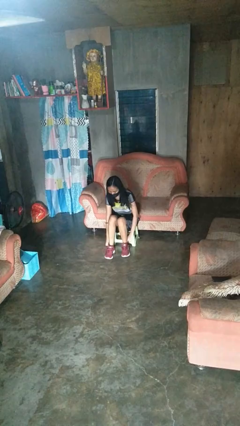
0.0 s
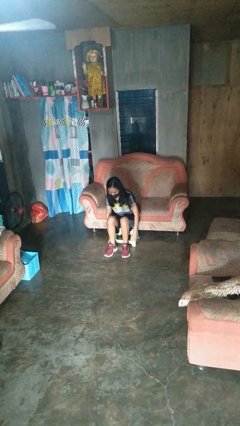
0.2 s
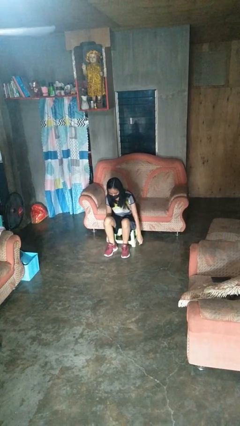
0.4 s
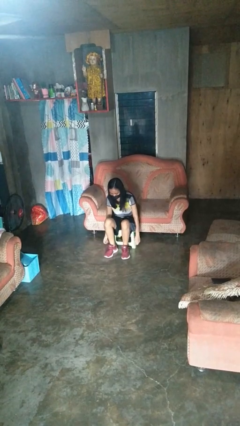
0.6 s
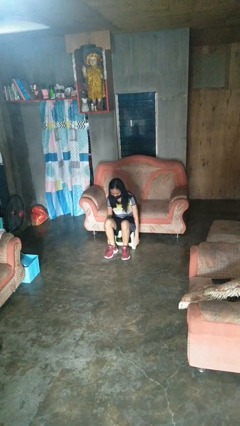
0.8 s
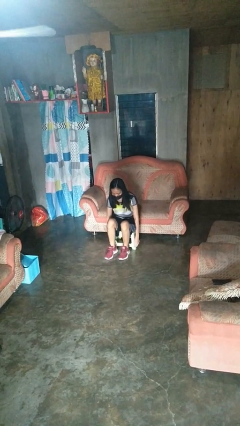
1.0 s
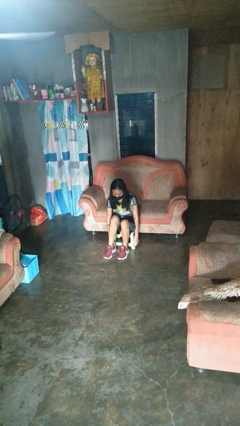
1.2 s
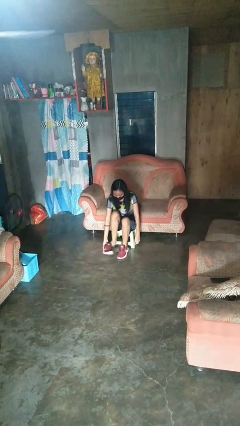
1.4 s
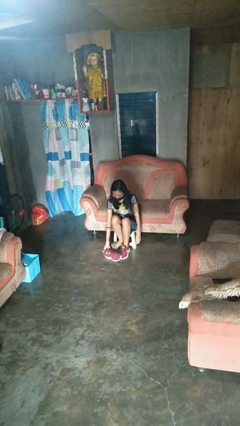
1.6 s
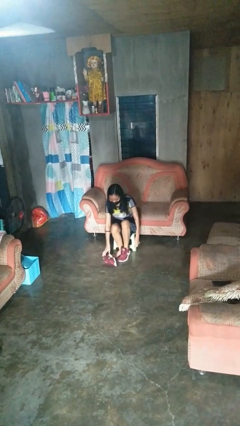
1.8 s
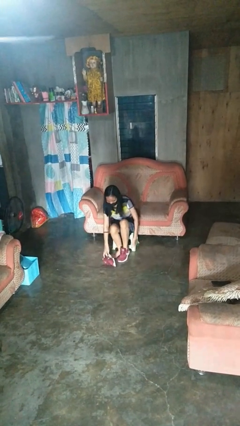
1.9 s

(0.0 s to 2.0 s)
person takes off shoes

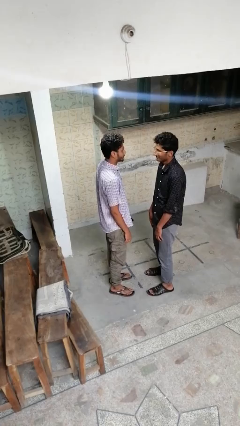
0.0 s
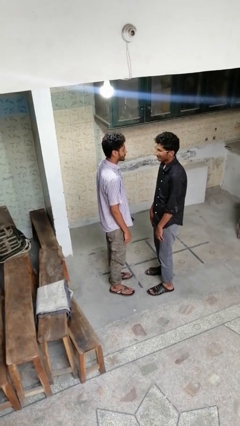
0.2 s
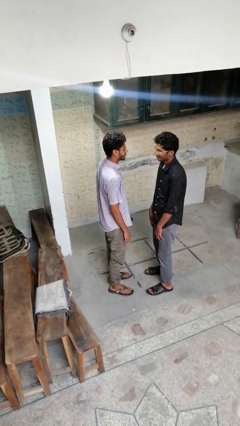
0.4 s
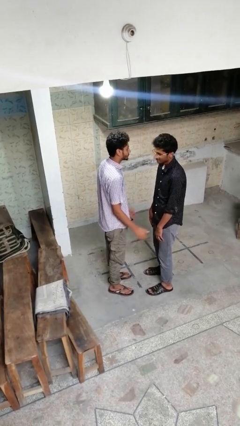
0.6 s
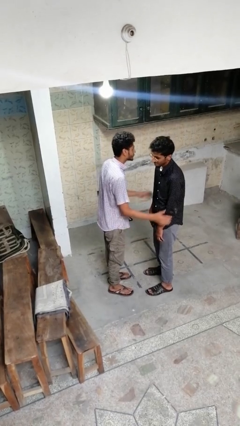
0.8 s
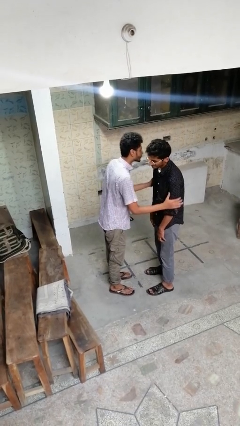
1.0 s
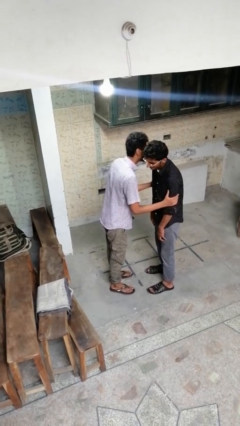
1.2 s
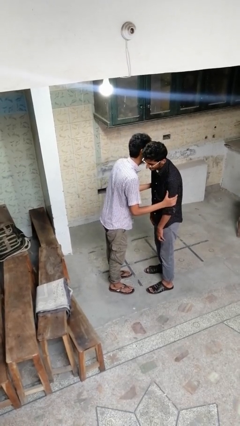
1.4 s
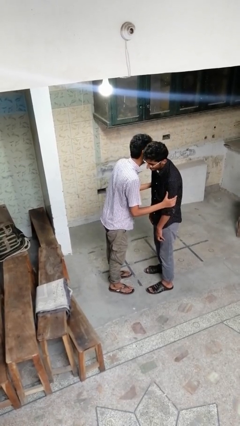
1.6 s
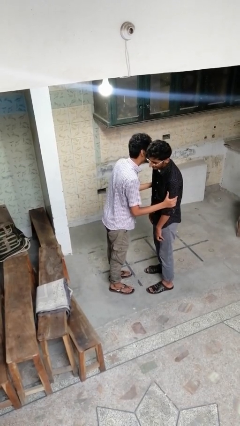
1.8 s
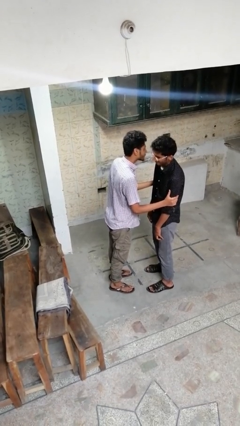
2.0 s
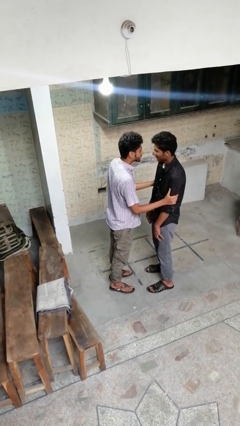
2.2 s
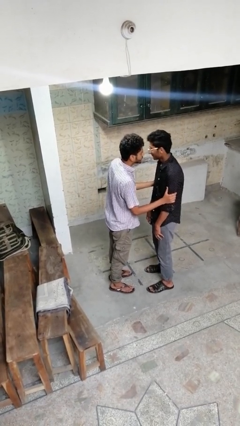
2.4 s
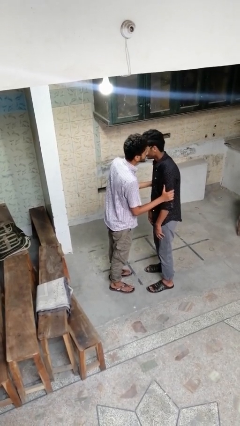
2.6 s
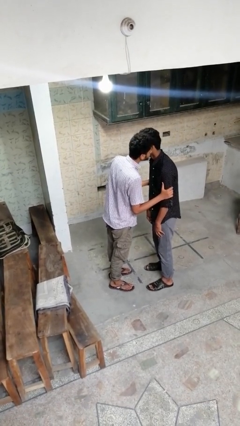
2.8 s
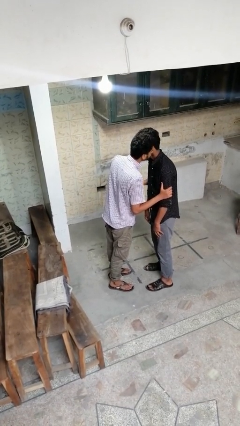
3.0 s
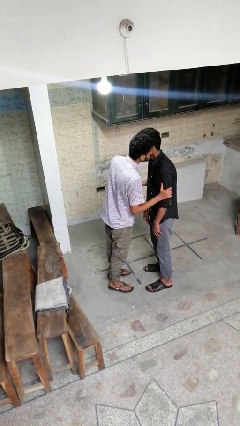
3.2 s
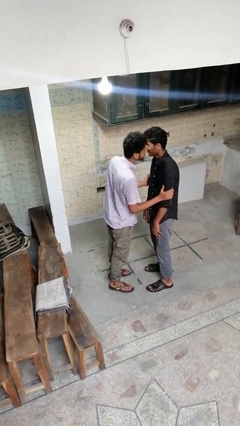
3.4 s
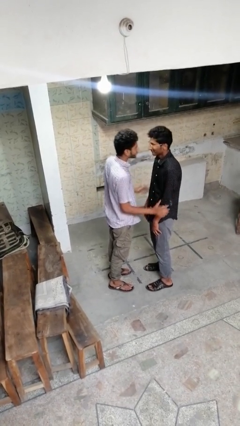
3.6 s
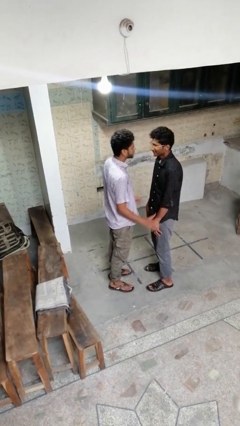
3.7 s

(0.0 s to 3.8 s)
person kisses cheek of person

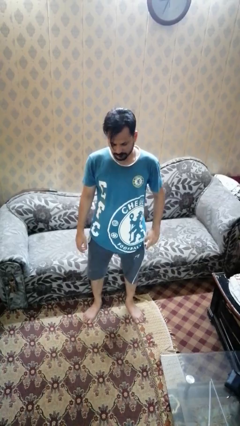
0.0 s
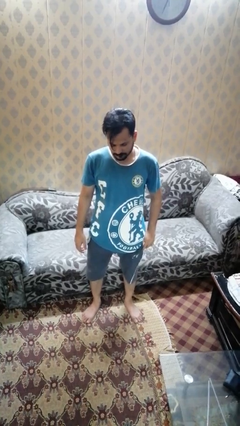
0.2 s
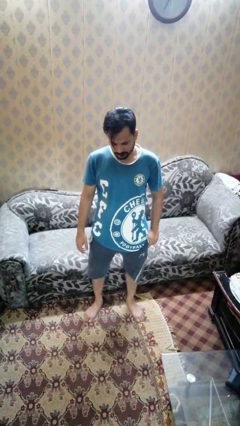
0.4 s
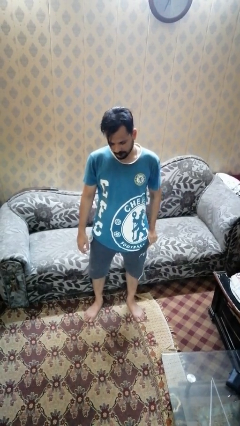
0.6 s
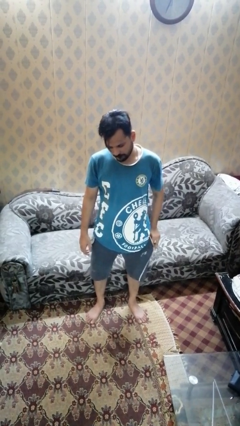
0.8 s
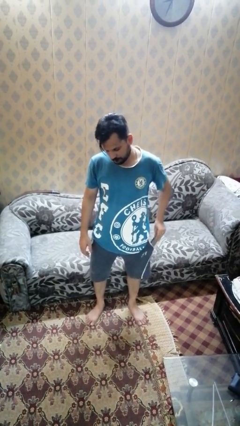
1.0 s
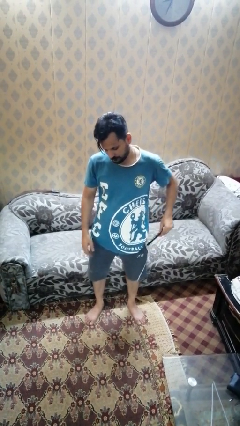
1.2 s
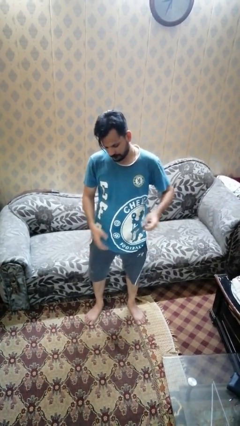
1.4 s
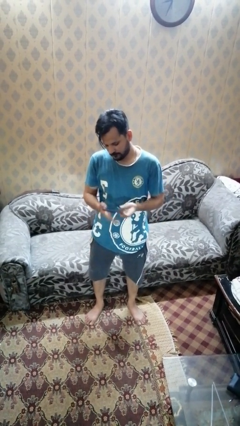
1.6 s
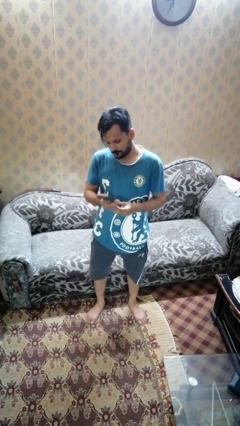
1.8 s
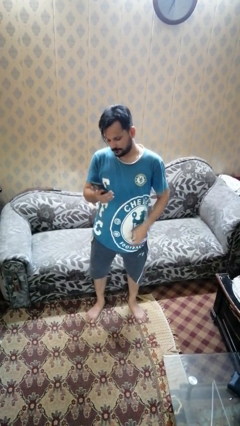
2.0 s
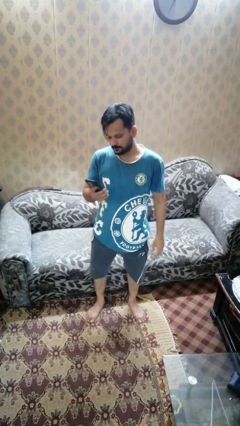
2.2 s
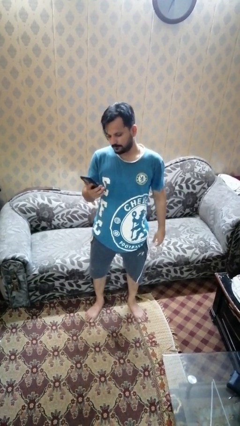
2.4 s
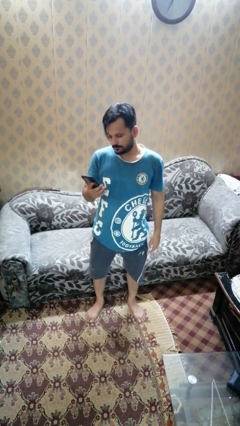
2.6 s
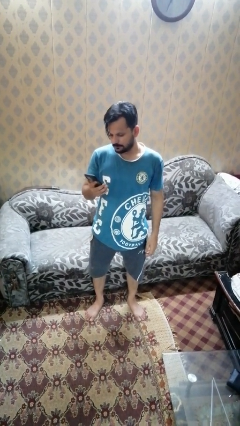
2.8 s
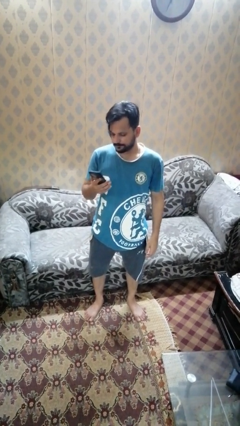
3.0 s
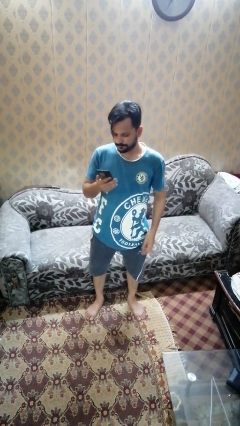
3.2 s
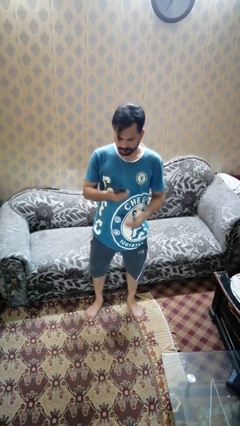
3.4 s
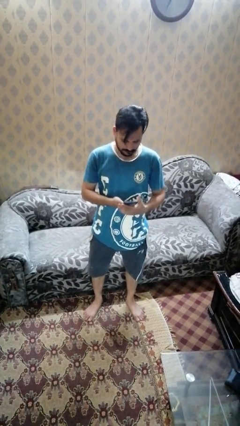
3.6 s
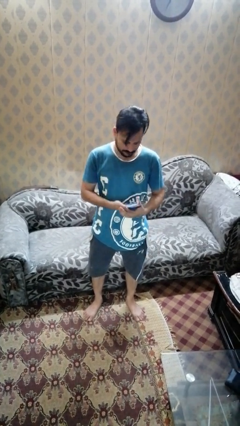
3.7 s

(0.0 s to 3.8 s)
person takes phone from pocket

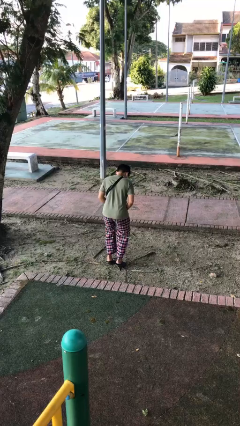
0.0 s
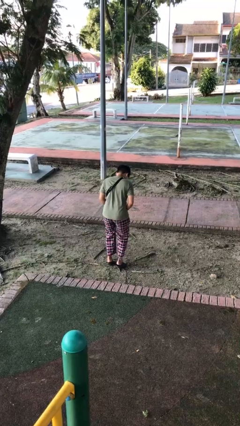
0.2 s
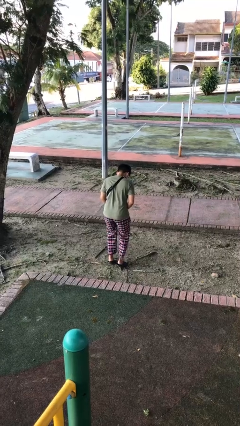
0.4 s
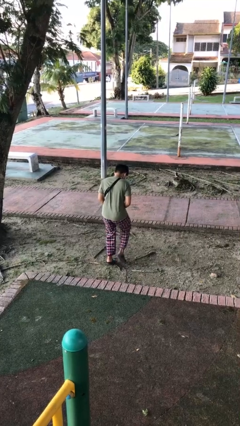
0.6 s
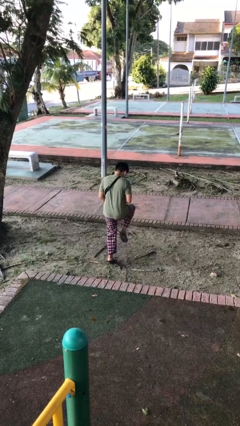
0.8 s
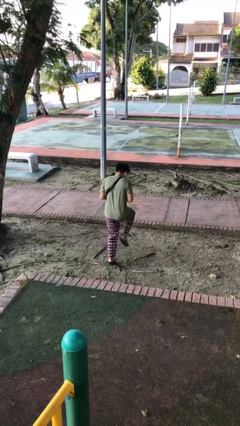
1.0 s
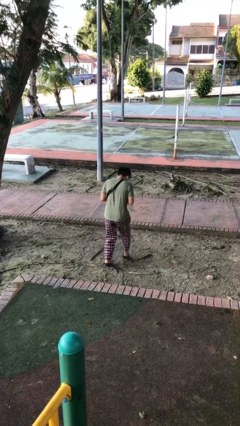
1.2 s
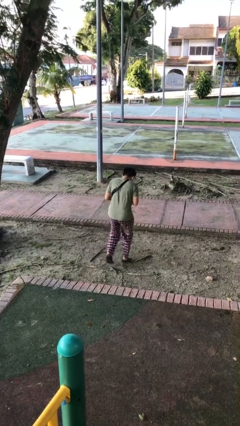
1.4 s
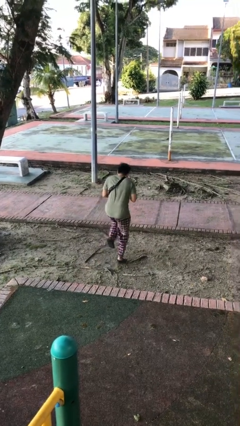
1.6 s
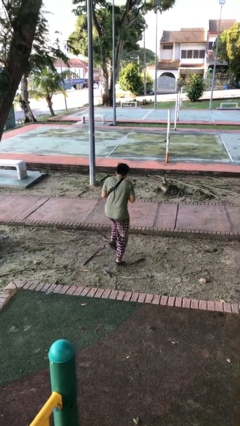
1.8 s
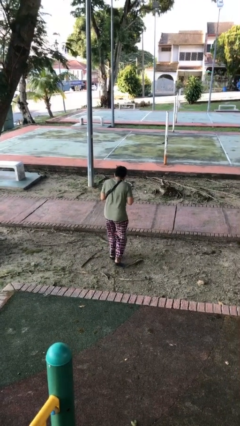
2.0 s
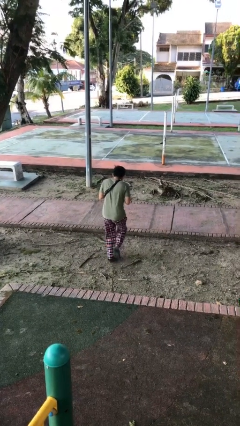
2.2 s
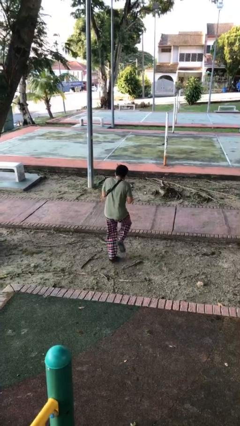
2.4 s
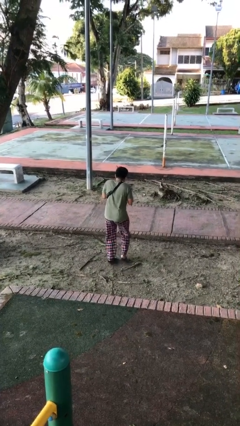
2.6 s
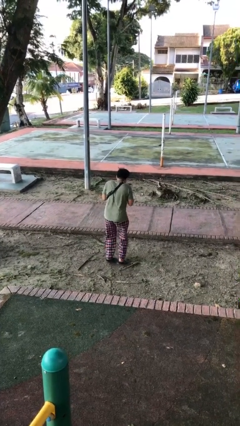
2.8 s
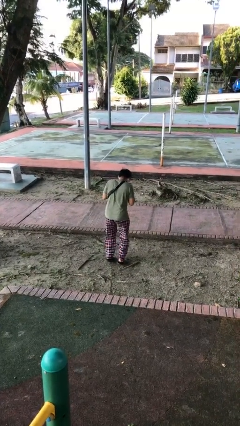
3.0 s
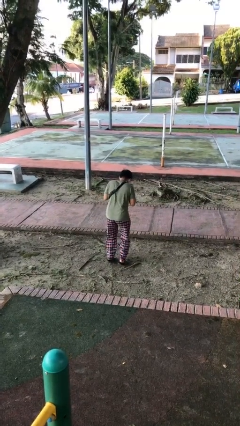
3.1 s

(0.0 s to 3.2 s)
person walks tiptoe

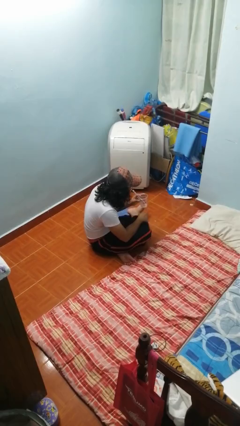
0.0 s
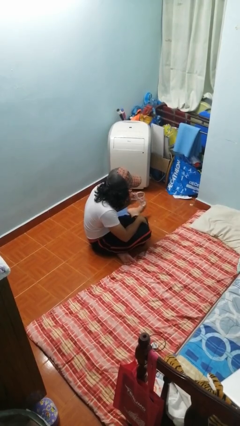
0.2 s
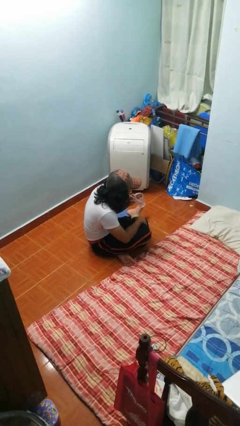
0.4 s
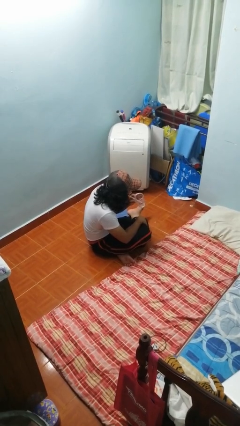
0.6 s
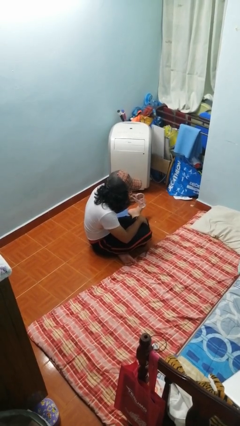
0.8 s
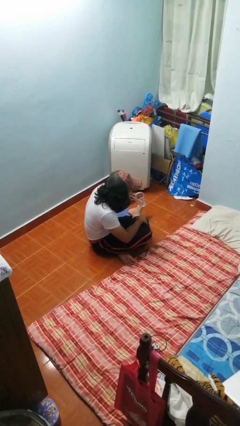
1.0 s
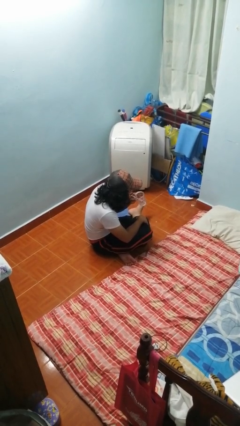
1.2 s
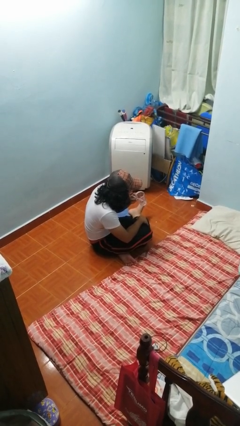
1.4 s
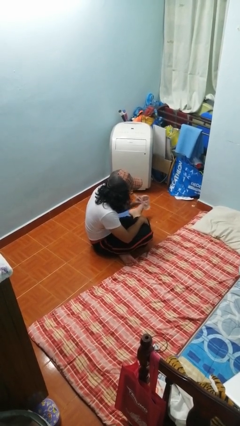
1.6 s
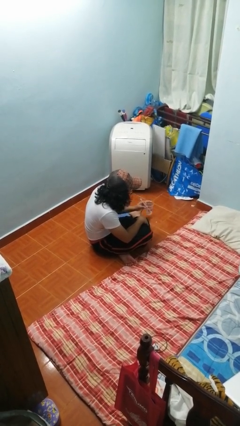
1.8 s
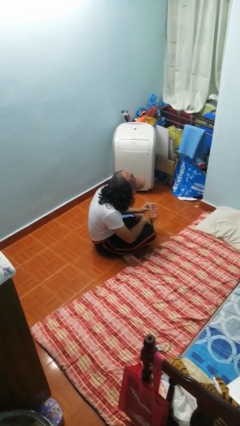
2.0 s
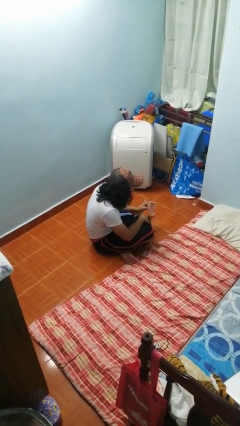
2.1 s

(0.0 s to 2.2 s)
person drinks from straw

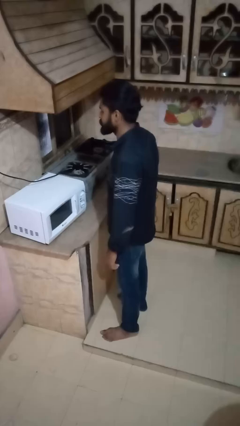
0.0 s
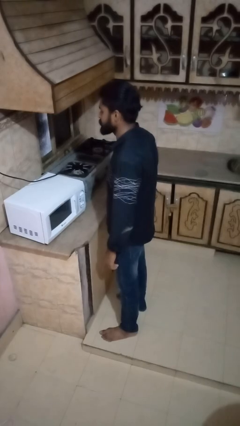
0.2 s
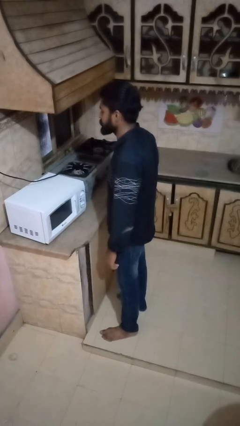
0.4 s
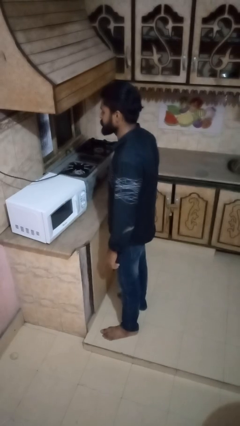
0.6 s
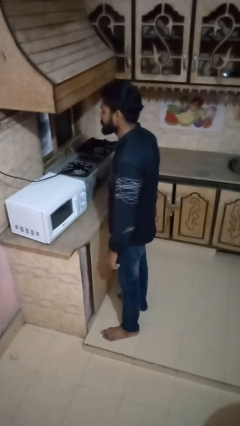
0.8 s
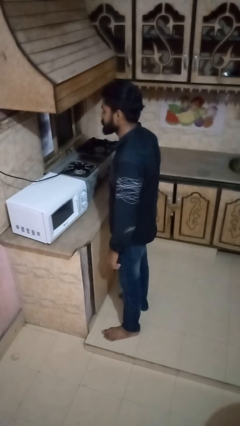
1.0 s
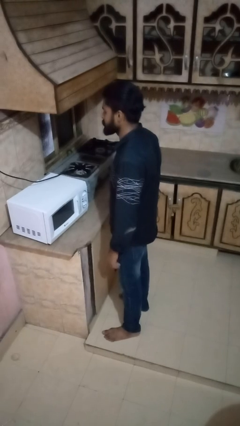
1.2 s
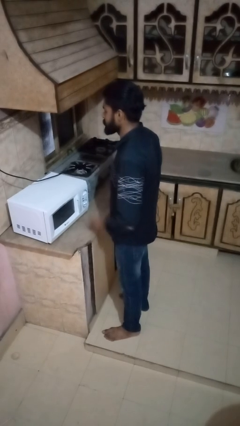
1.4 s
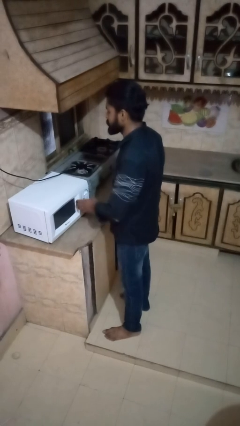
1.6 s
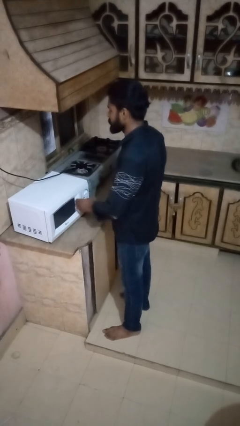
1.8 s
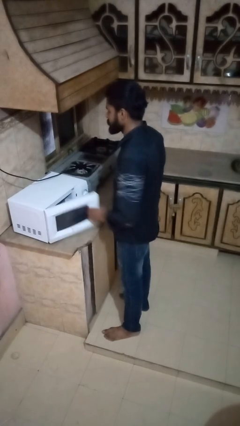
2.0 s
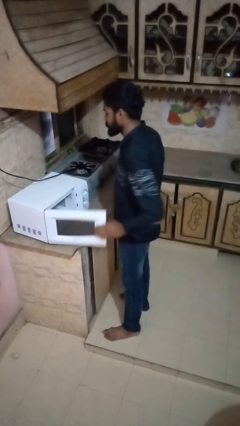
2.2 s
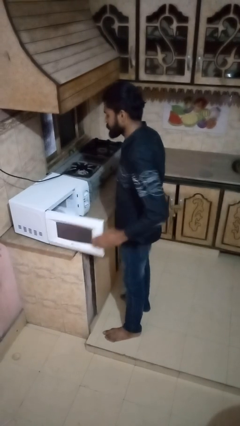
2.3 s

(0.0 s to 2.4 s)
person opens oven door
